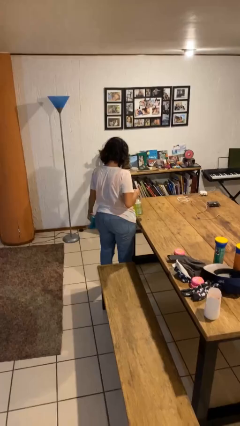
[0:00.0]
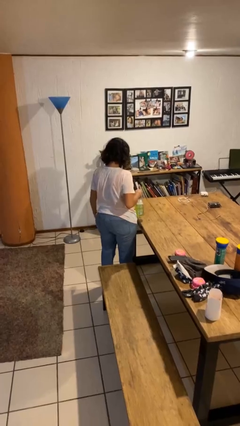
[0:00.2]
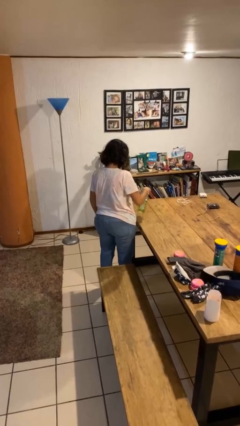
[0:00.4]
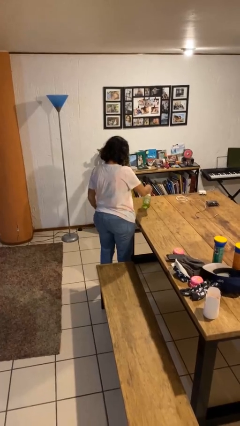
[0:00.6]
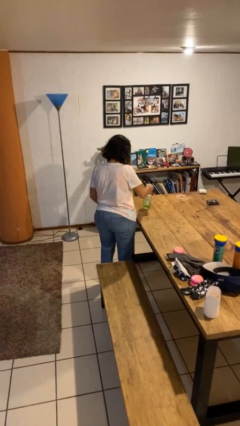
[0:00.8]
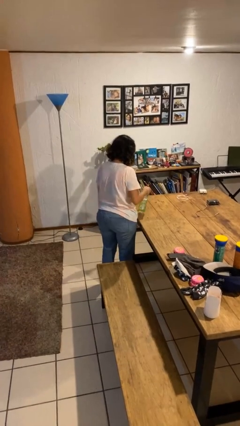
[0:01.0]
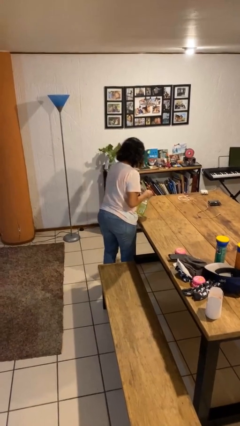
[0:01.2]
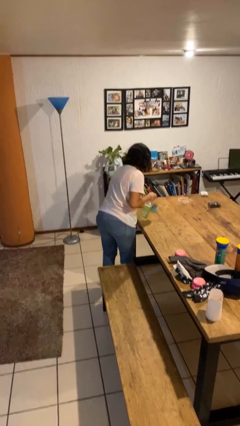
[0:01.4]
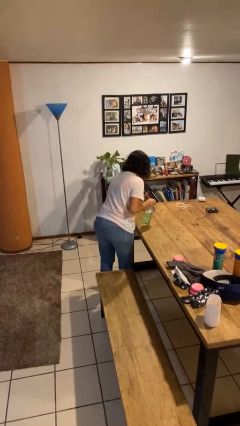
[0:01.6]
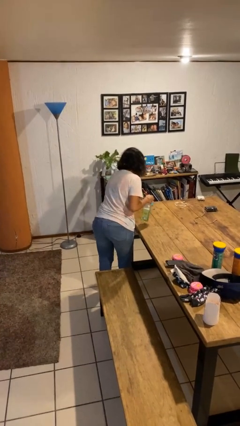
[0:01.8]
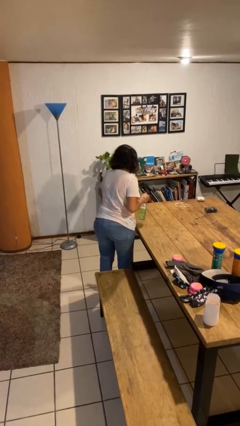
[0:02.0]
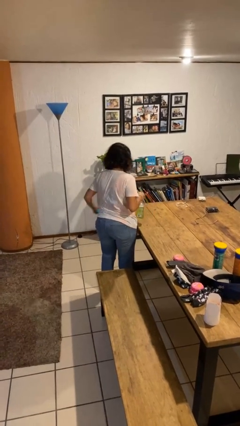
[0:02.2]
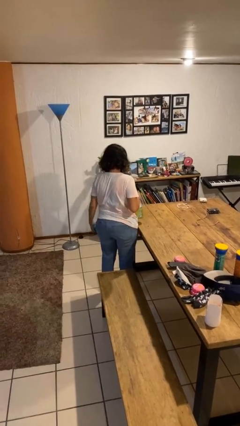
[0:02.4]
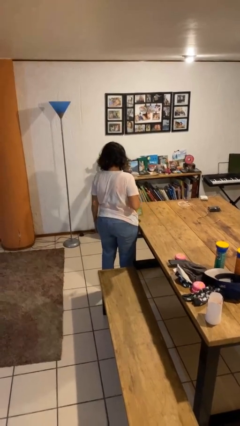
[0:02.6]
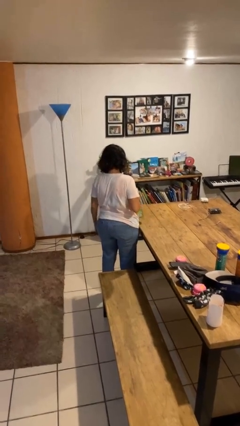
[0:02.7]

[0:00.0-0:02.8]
person sprays from bottle

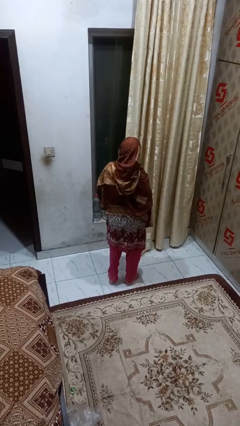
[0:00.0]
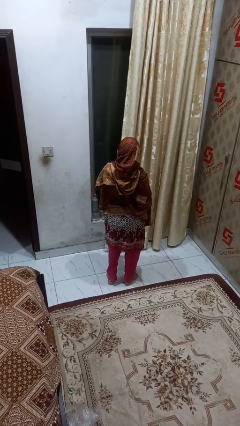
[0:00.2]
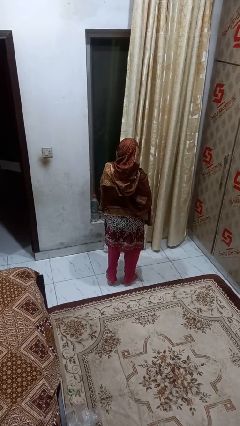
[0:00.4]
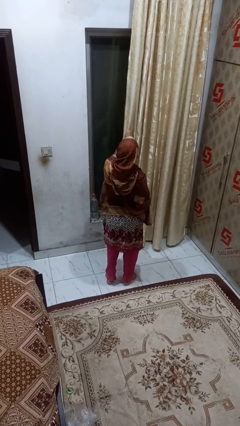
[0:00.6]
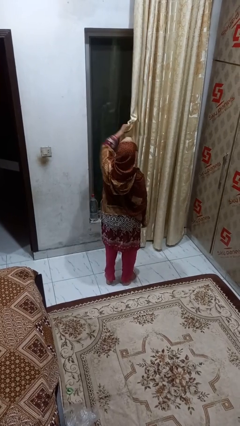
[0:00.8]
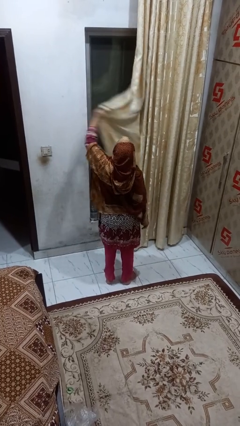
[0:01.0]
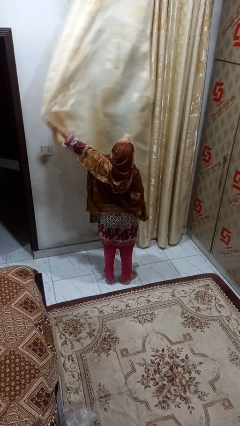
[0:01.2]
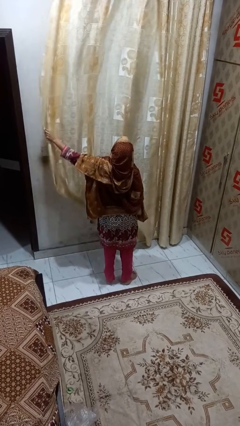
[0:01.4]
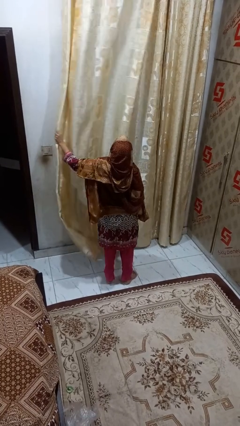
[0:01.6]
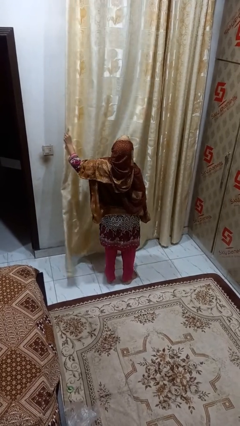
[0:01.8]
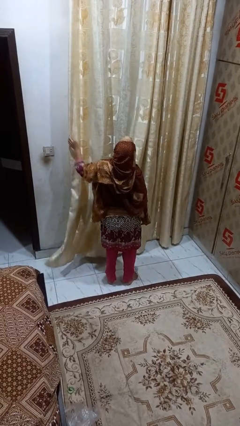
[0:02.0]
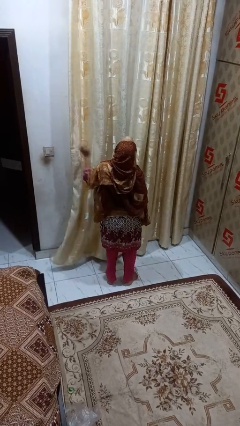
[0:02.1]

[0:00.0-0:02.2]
person closes curtains

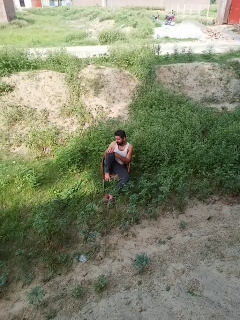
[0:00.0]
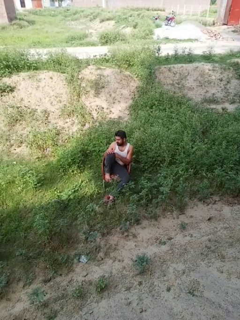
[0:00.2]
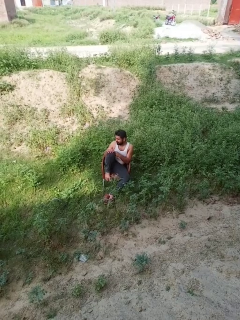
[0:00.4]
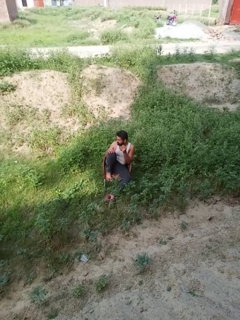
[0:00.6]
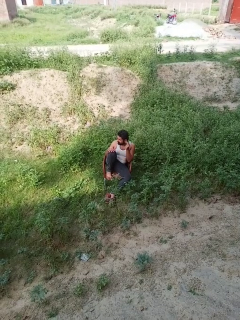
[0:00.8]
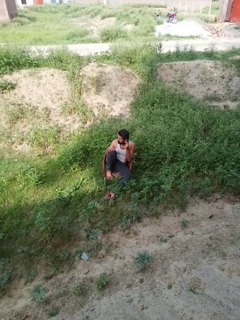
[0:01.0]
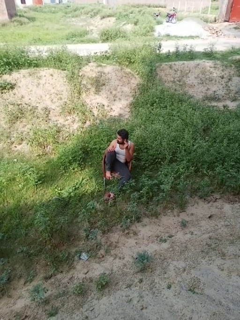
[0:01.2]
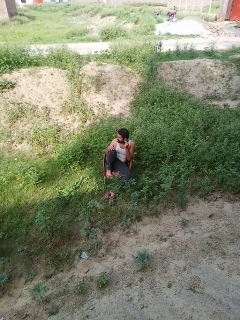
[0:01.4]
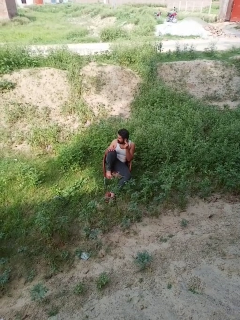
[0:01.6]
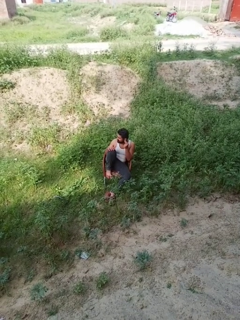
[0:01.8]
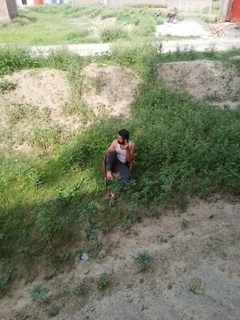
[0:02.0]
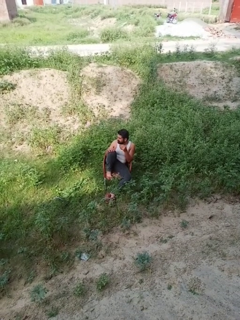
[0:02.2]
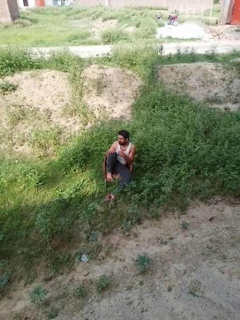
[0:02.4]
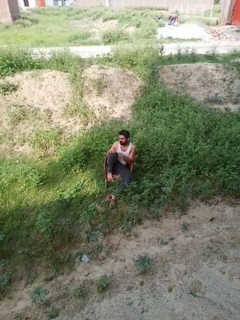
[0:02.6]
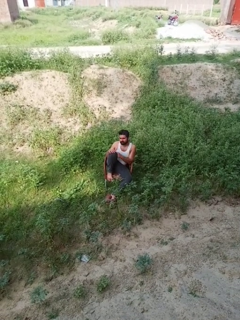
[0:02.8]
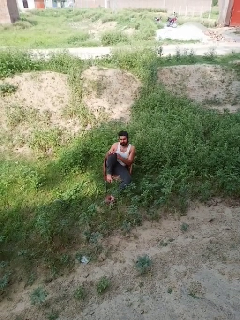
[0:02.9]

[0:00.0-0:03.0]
person touches earlobe

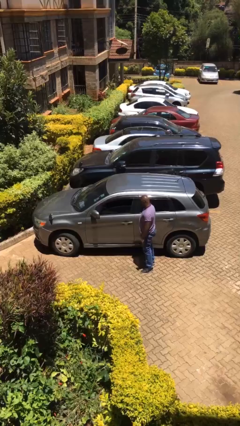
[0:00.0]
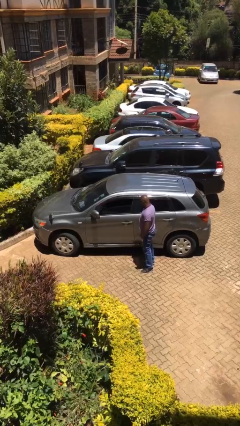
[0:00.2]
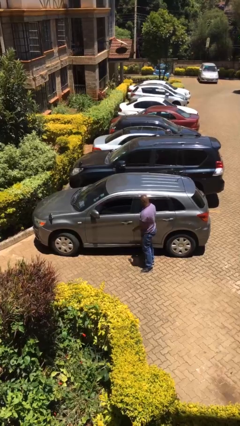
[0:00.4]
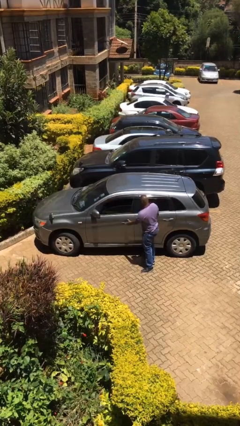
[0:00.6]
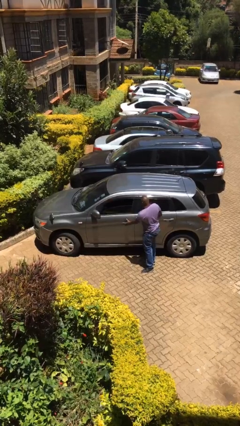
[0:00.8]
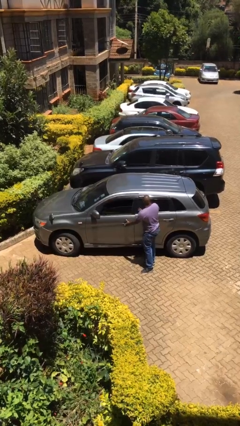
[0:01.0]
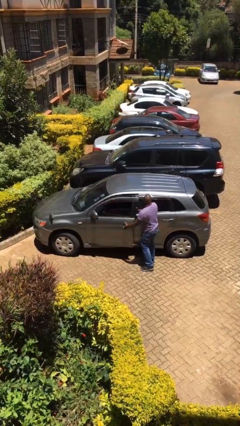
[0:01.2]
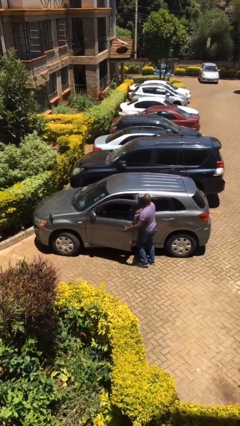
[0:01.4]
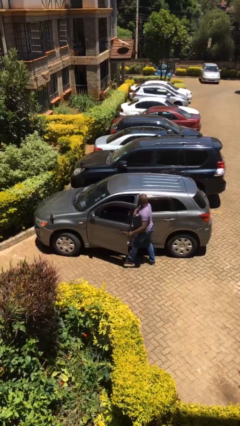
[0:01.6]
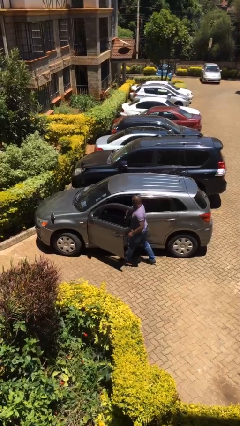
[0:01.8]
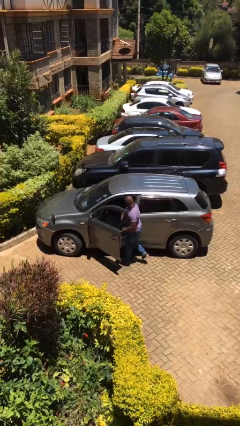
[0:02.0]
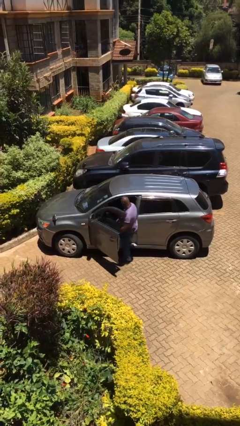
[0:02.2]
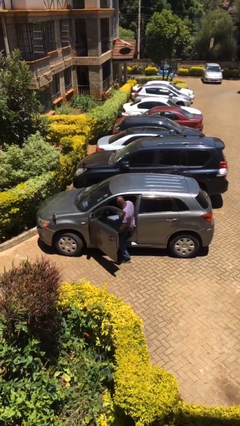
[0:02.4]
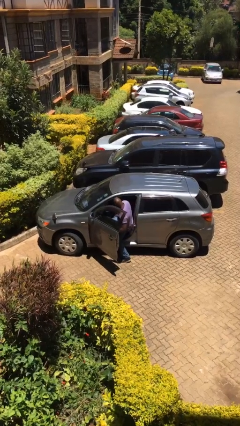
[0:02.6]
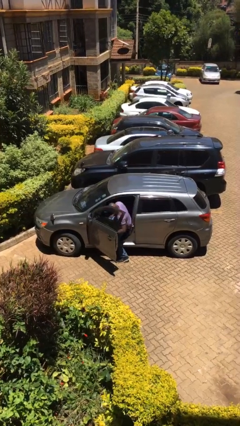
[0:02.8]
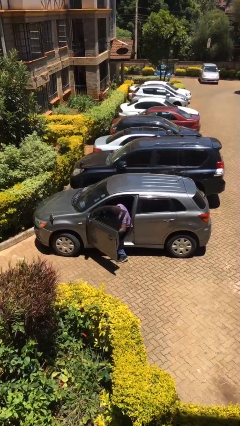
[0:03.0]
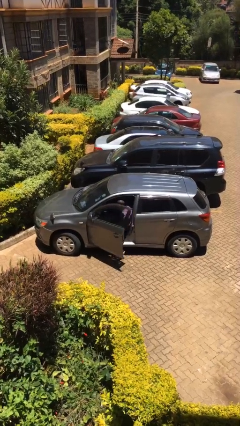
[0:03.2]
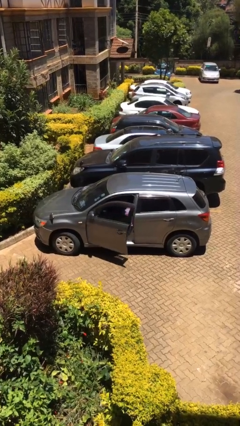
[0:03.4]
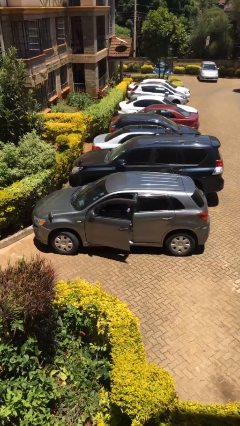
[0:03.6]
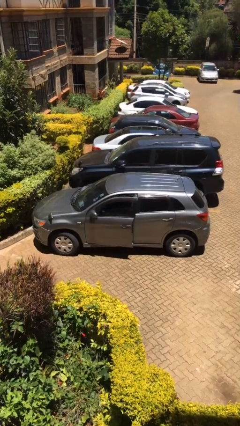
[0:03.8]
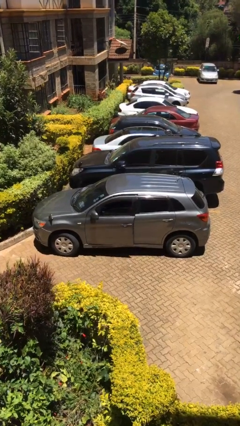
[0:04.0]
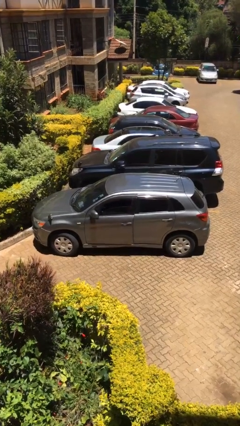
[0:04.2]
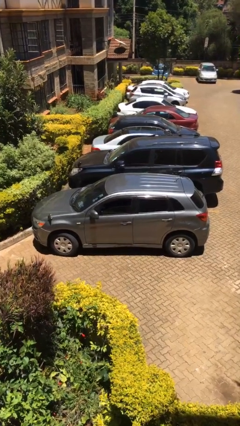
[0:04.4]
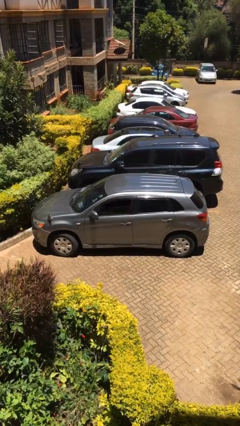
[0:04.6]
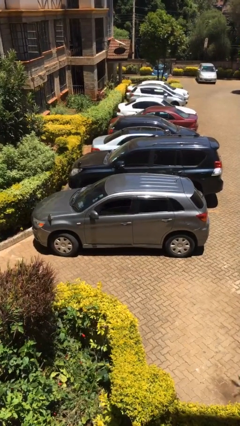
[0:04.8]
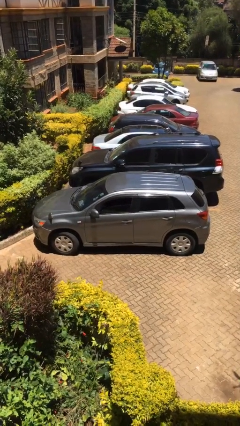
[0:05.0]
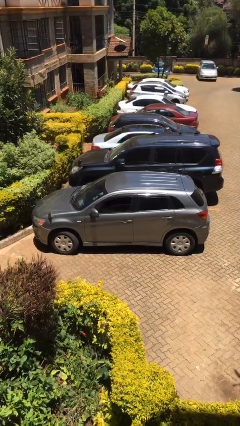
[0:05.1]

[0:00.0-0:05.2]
car picks up person

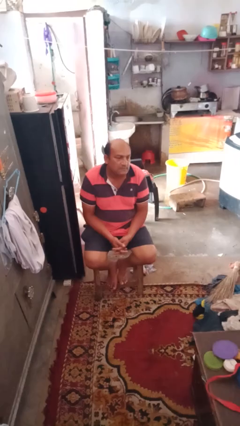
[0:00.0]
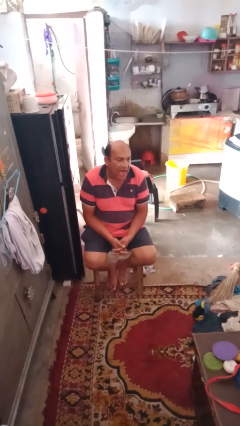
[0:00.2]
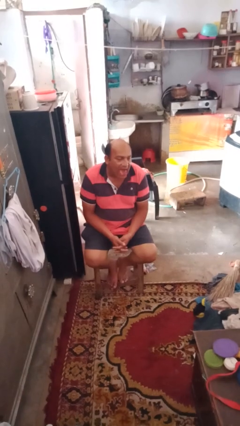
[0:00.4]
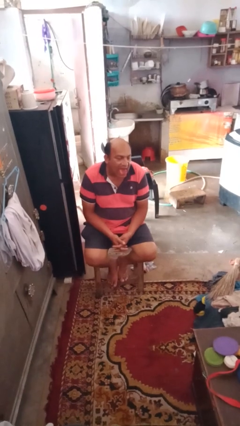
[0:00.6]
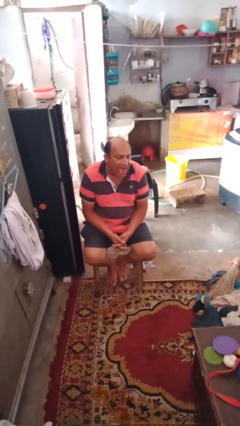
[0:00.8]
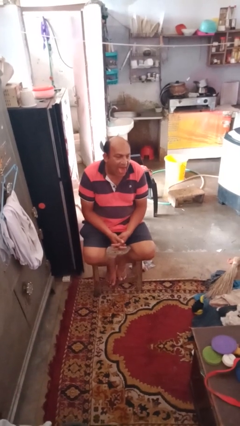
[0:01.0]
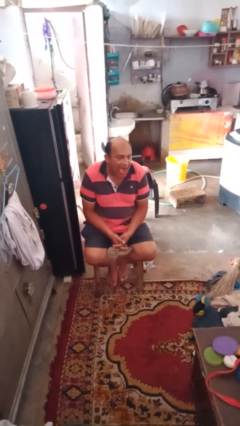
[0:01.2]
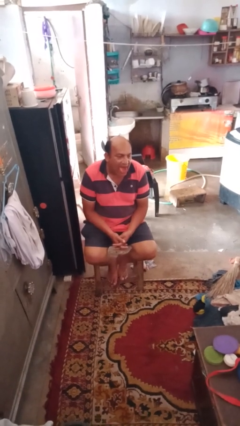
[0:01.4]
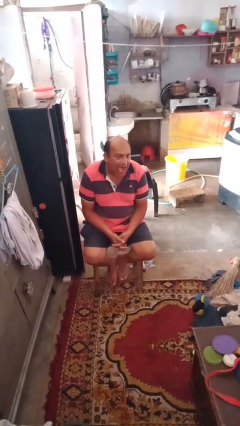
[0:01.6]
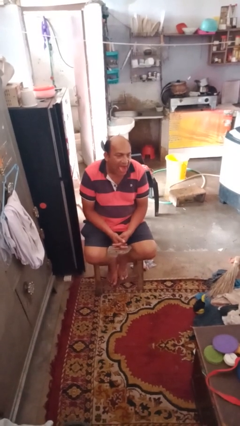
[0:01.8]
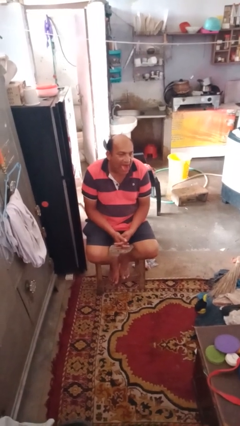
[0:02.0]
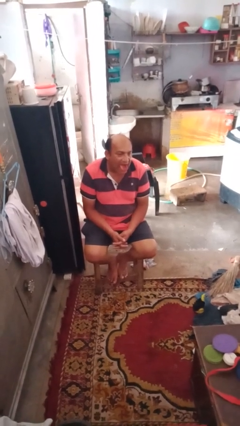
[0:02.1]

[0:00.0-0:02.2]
person sticks out tongue

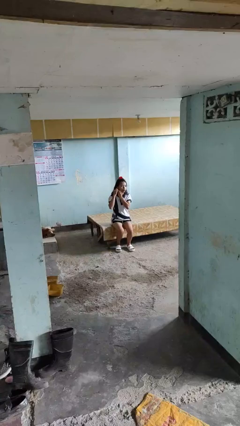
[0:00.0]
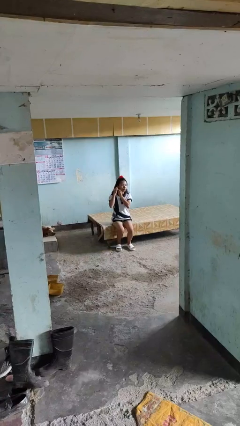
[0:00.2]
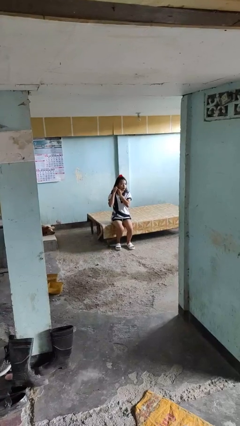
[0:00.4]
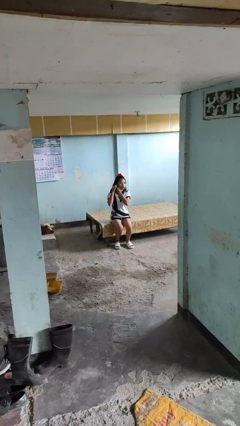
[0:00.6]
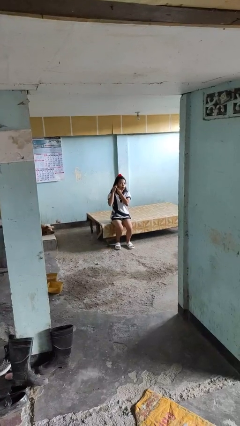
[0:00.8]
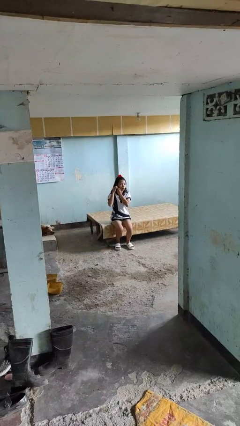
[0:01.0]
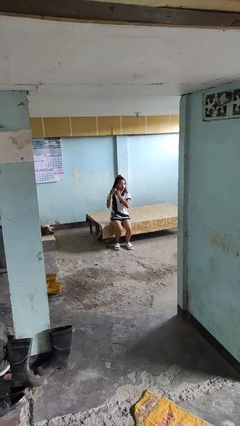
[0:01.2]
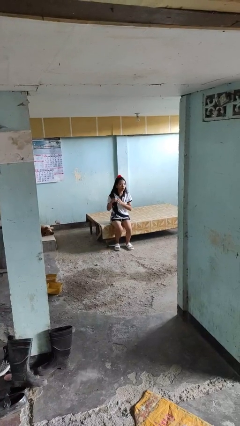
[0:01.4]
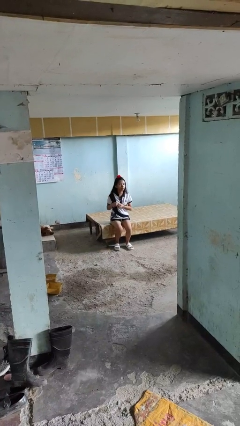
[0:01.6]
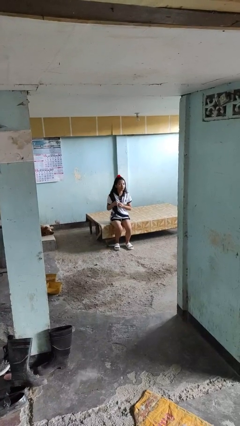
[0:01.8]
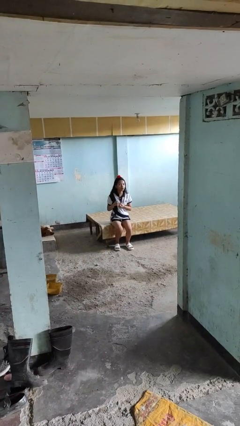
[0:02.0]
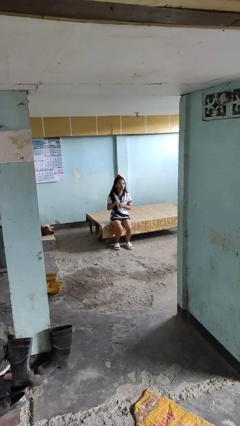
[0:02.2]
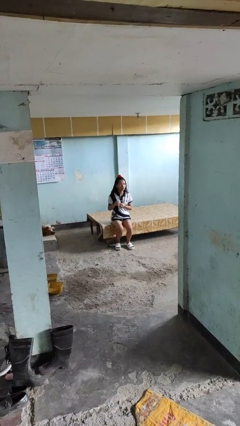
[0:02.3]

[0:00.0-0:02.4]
person takes off earrings

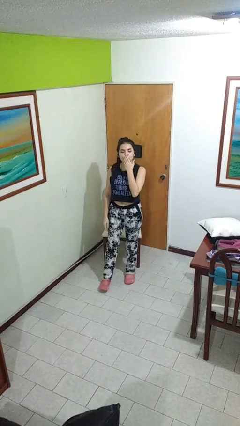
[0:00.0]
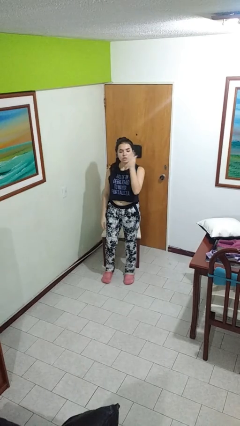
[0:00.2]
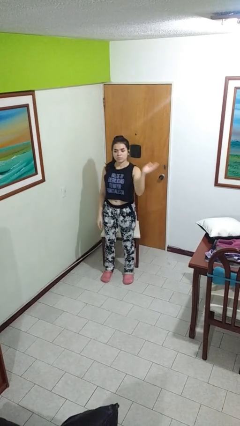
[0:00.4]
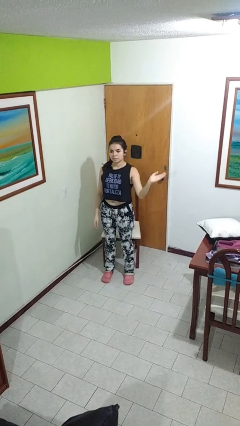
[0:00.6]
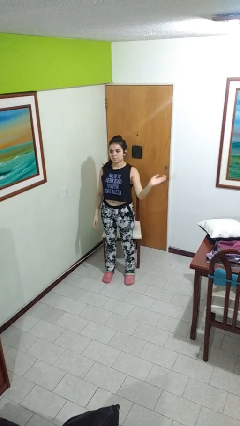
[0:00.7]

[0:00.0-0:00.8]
person gestures blow kiss
